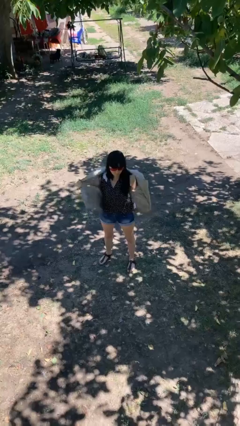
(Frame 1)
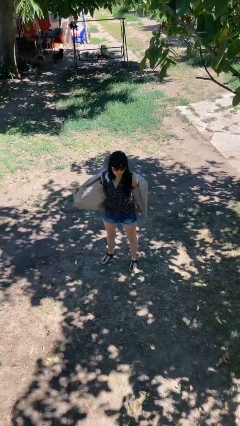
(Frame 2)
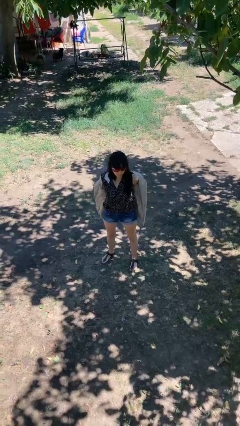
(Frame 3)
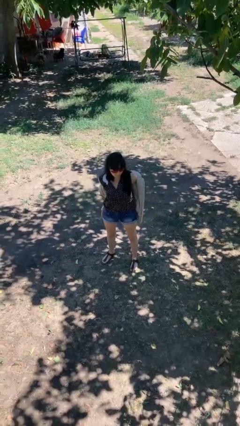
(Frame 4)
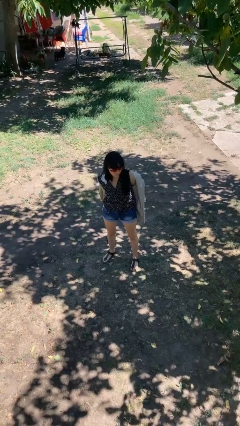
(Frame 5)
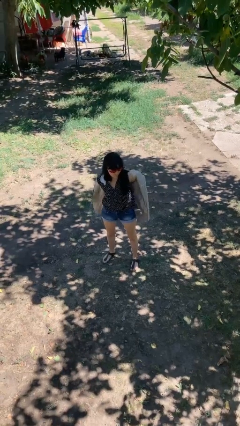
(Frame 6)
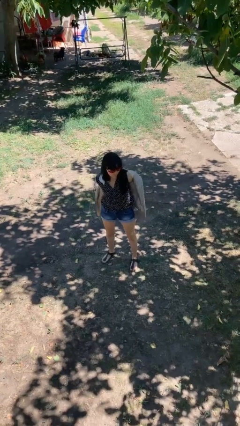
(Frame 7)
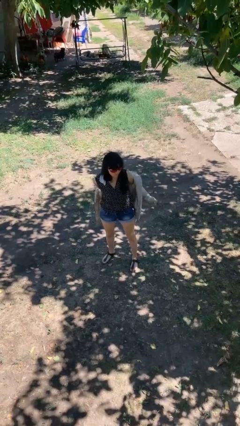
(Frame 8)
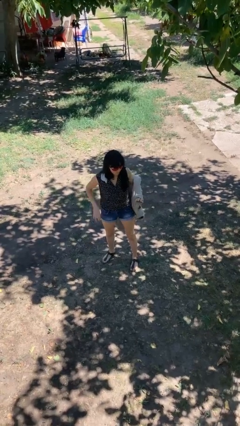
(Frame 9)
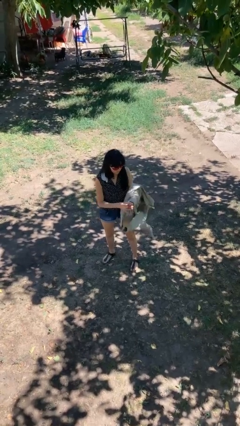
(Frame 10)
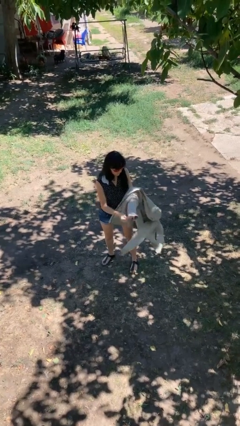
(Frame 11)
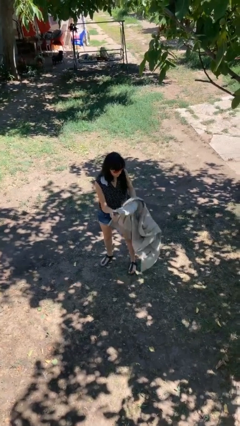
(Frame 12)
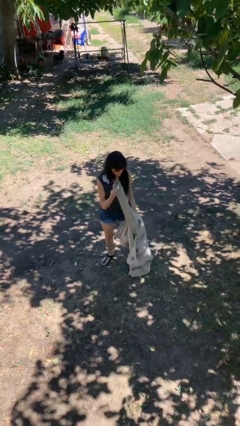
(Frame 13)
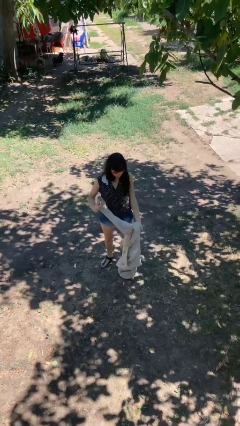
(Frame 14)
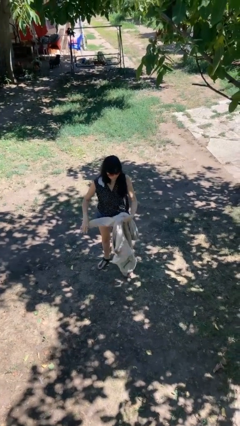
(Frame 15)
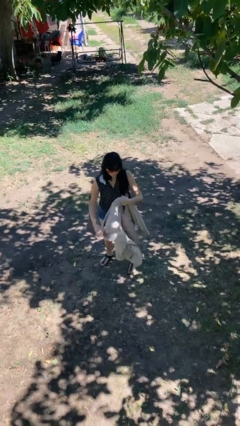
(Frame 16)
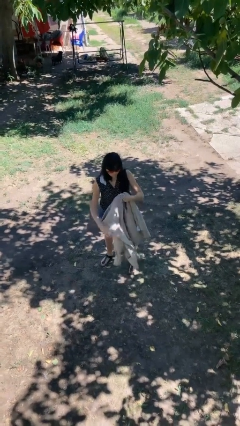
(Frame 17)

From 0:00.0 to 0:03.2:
person takes off jacket

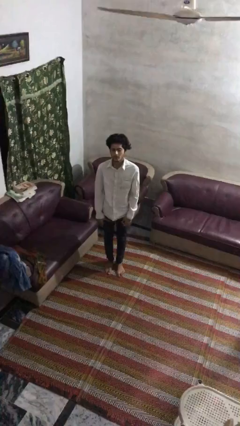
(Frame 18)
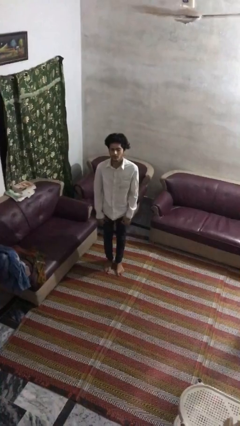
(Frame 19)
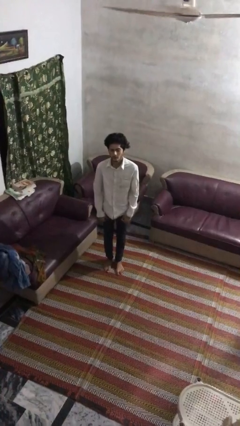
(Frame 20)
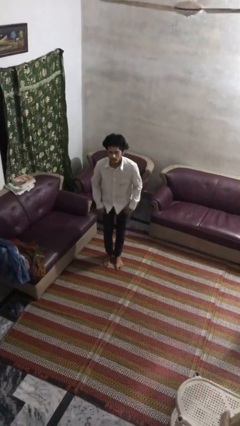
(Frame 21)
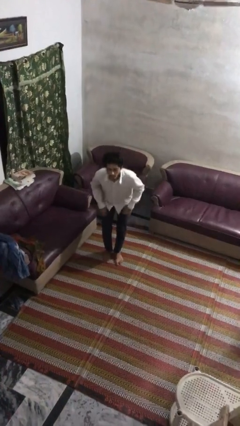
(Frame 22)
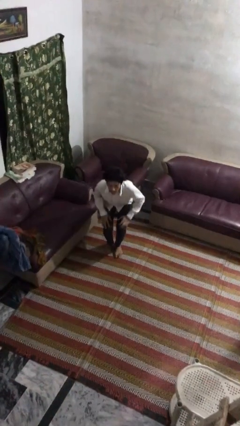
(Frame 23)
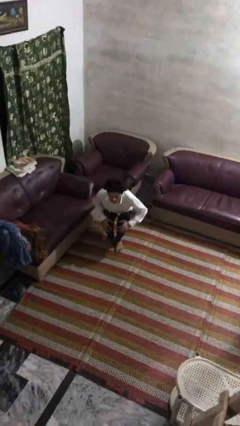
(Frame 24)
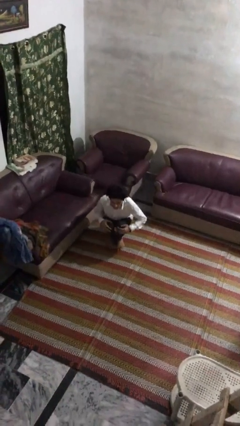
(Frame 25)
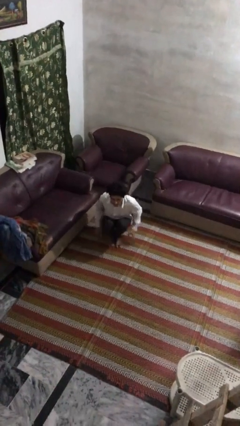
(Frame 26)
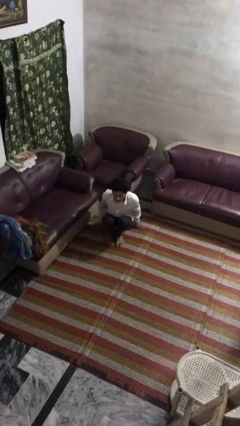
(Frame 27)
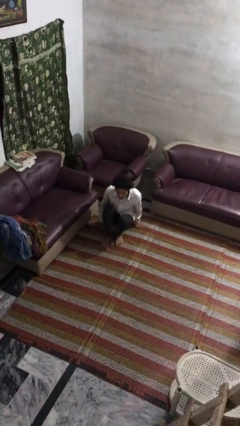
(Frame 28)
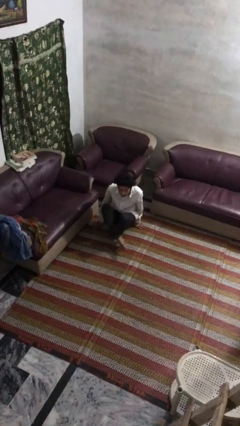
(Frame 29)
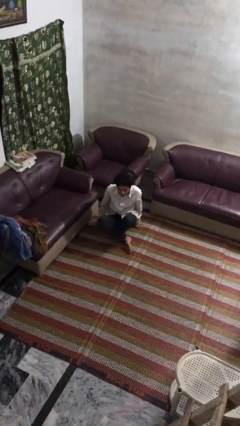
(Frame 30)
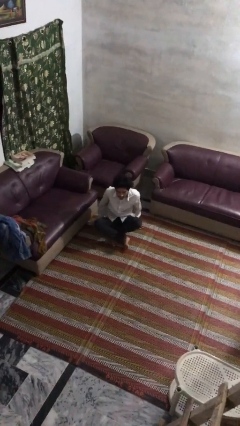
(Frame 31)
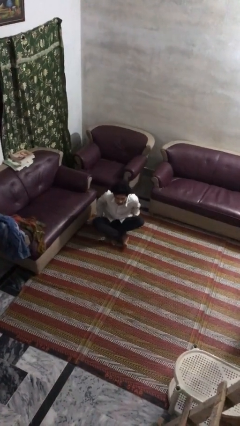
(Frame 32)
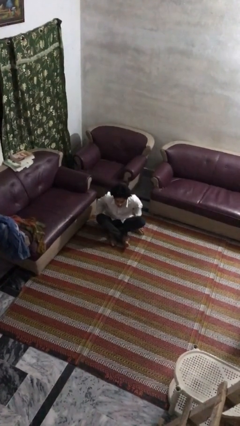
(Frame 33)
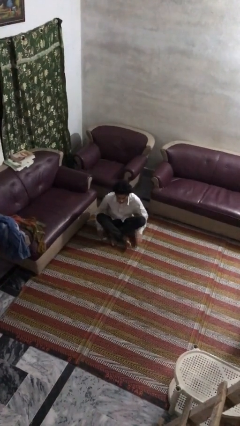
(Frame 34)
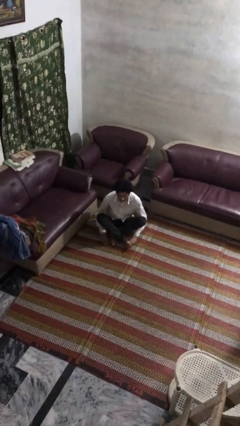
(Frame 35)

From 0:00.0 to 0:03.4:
person sits crisscross

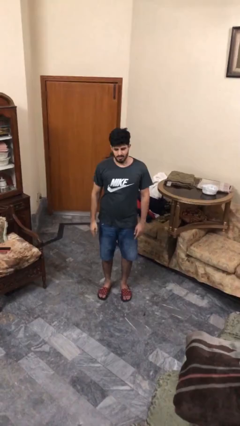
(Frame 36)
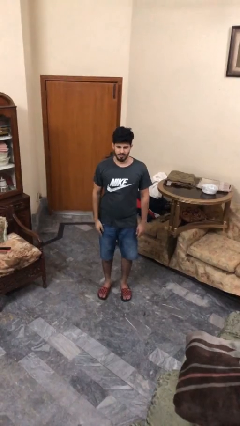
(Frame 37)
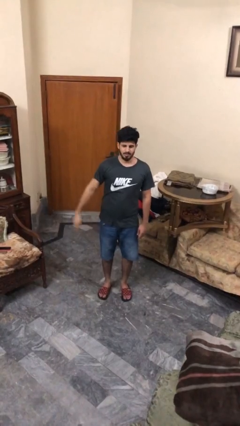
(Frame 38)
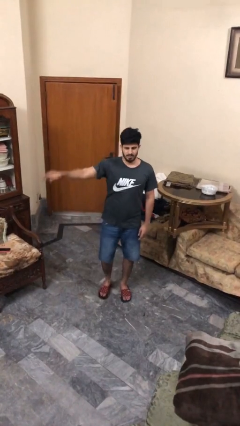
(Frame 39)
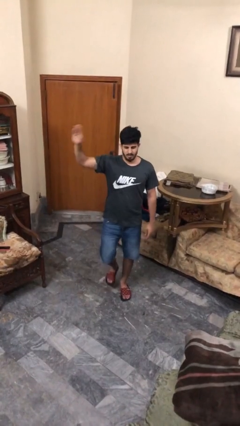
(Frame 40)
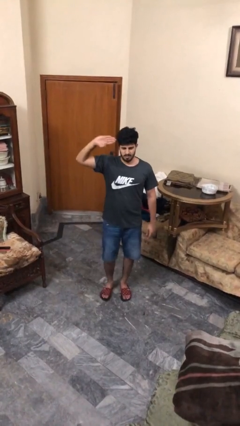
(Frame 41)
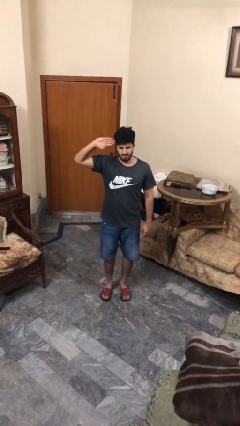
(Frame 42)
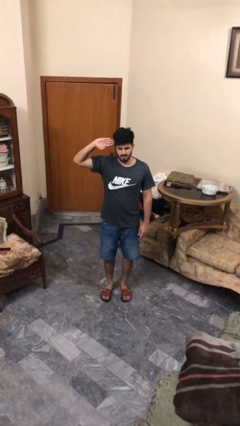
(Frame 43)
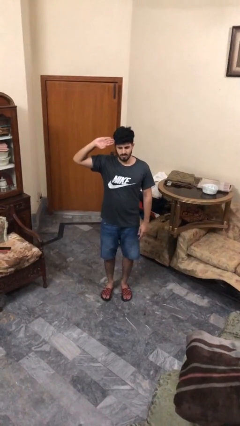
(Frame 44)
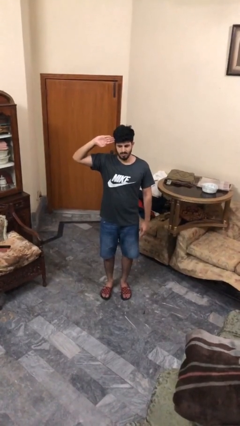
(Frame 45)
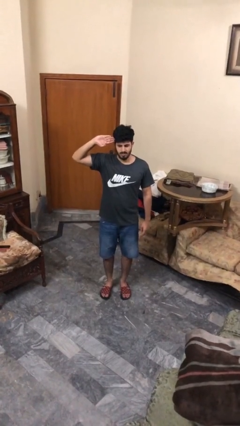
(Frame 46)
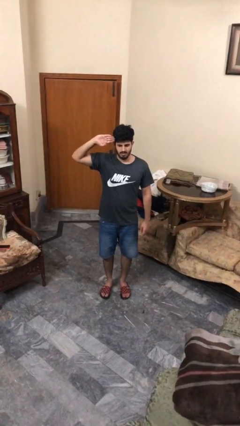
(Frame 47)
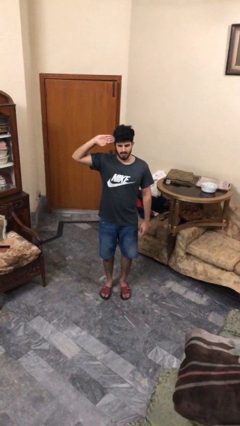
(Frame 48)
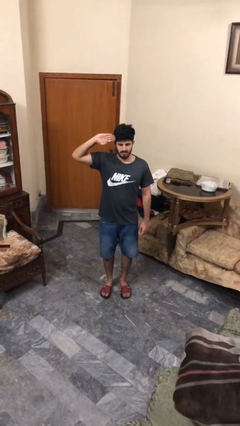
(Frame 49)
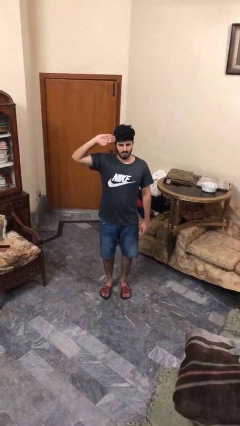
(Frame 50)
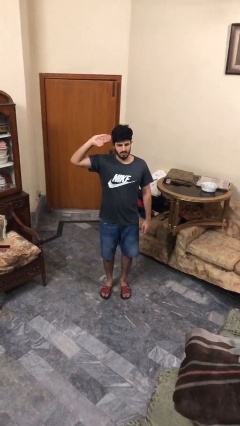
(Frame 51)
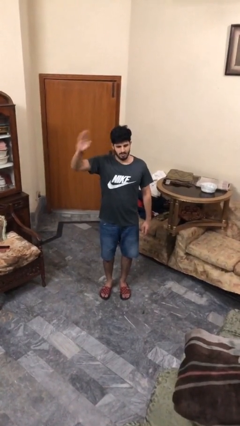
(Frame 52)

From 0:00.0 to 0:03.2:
person salutes

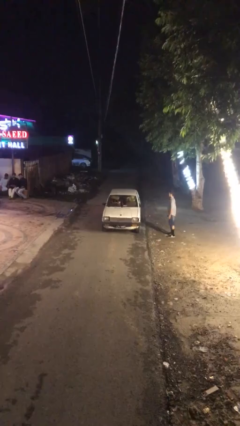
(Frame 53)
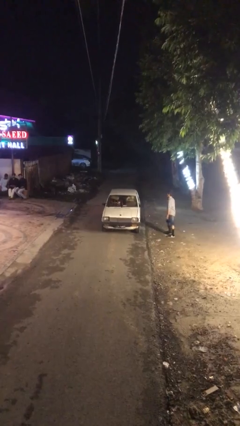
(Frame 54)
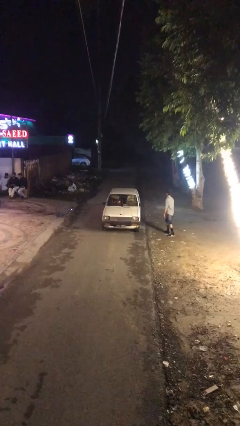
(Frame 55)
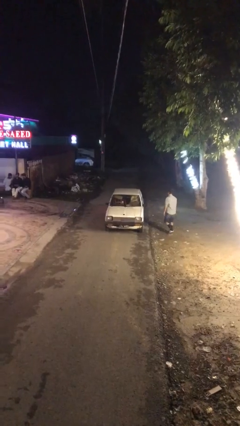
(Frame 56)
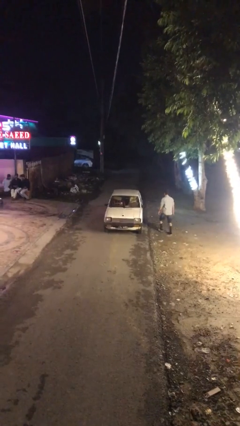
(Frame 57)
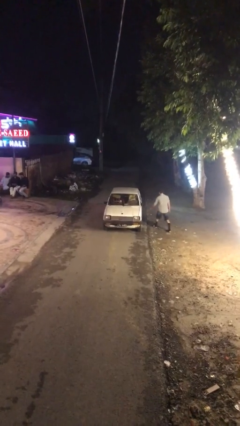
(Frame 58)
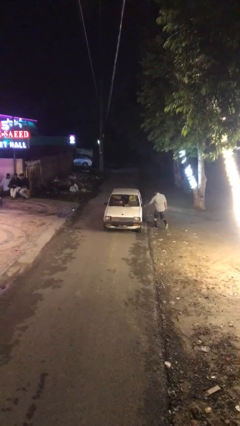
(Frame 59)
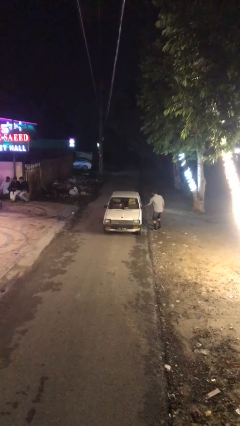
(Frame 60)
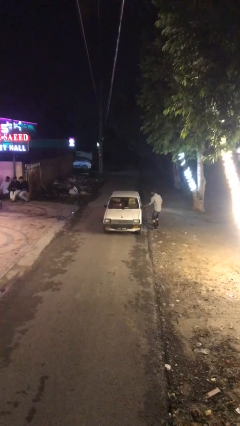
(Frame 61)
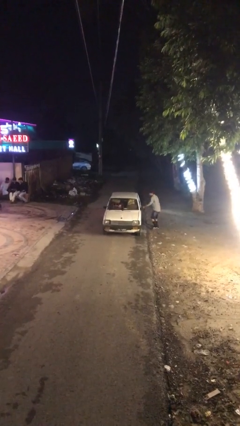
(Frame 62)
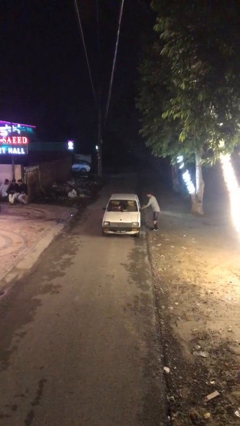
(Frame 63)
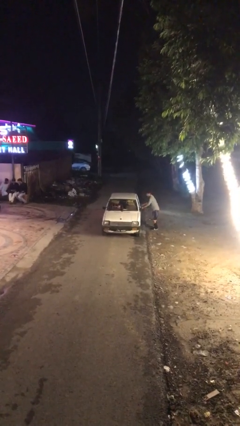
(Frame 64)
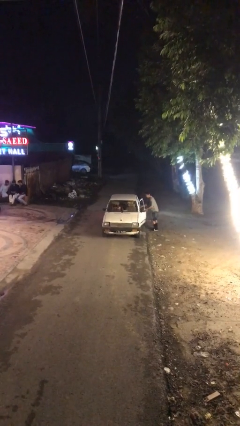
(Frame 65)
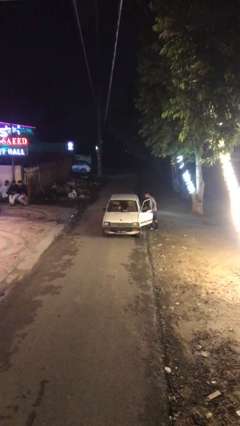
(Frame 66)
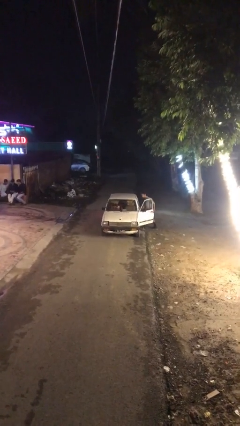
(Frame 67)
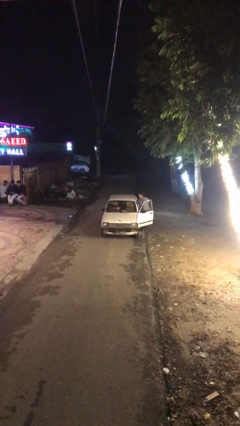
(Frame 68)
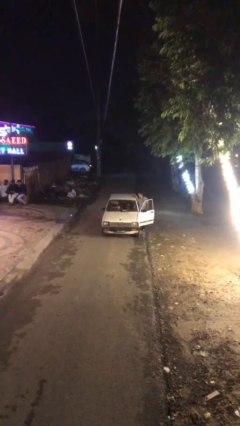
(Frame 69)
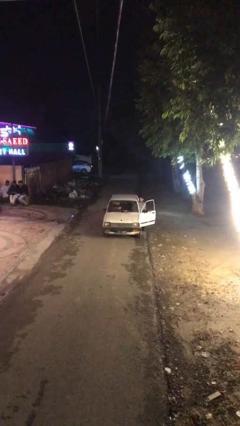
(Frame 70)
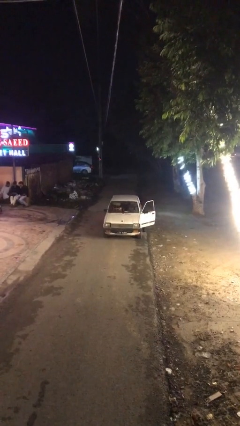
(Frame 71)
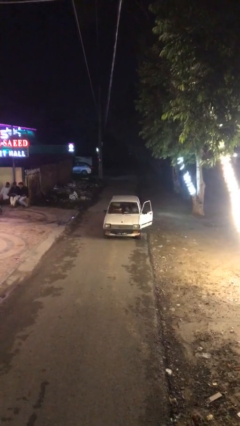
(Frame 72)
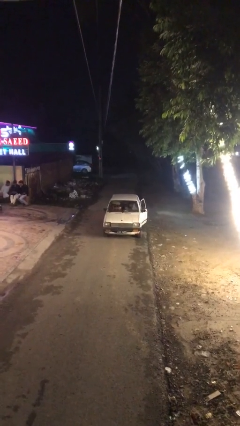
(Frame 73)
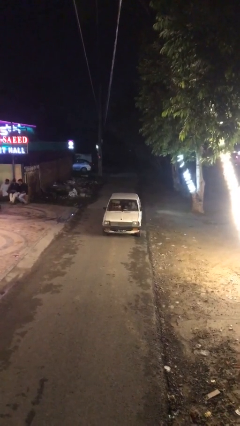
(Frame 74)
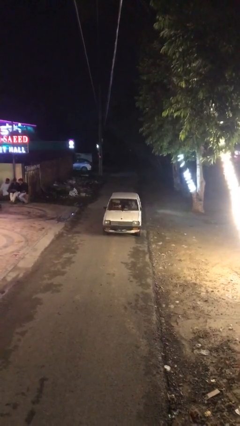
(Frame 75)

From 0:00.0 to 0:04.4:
car picks up person

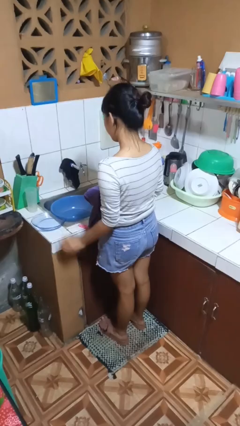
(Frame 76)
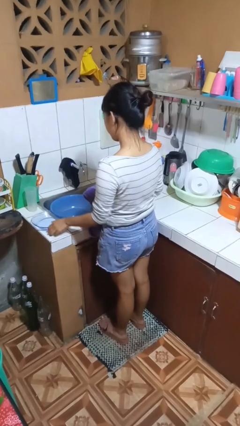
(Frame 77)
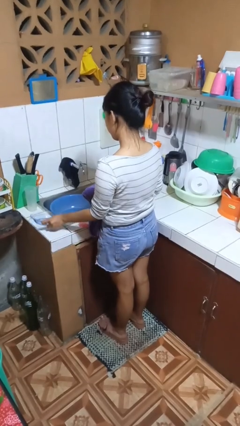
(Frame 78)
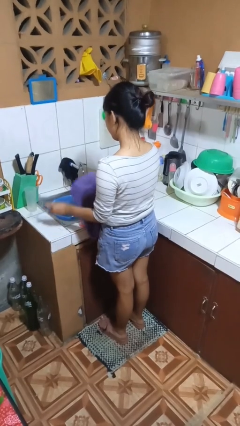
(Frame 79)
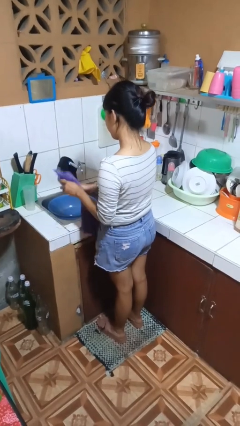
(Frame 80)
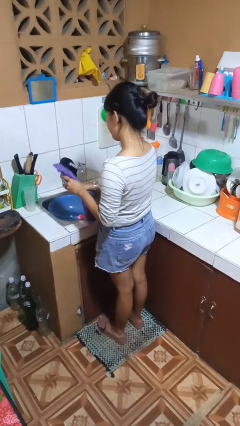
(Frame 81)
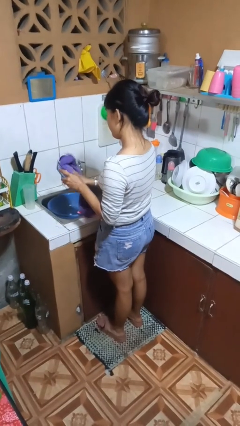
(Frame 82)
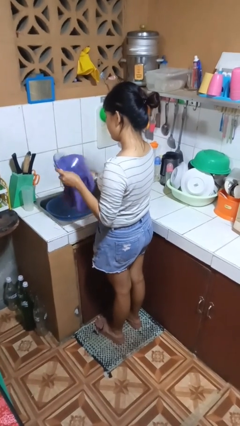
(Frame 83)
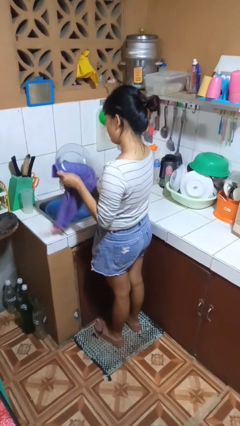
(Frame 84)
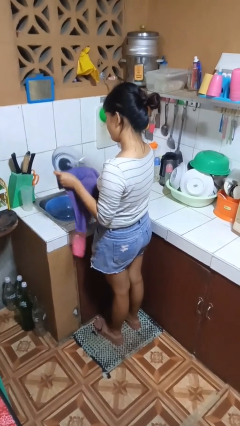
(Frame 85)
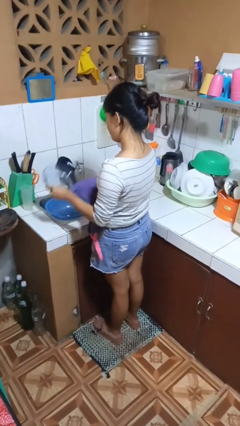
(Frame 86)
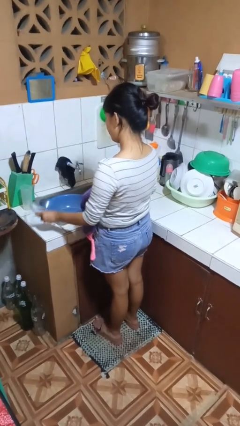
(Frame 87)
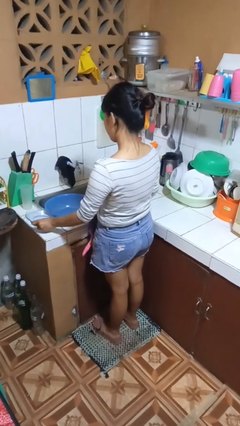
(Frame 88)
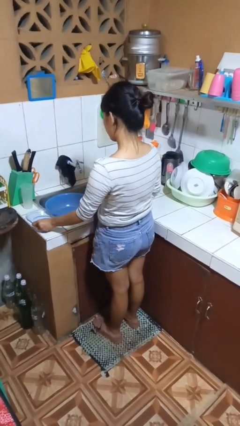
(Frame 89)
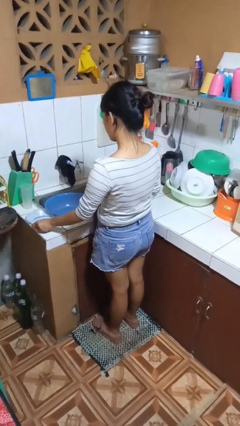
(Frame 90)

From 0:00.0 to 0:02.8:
person dries dish

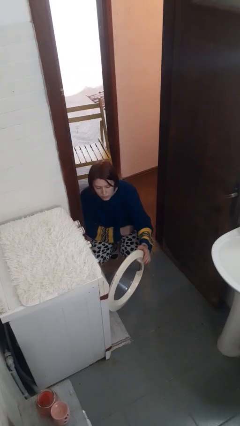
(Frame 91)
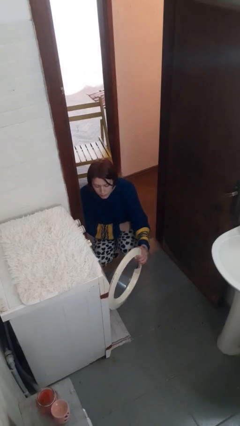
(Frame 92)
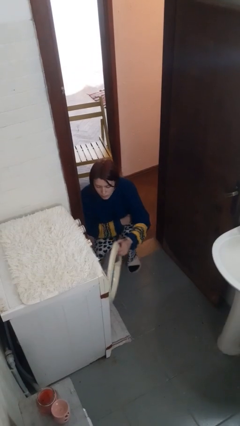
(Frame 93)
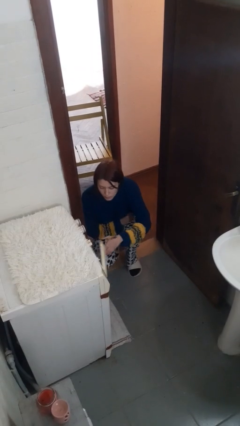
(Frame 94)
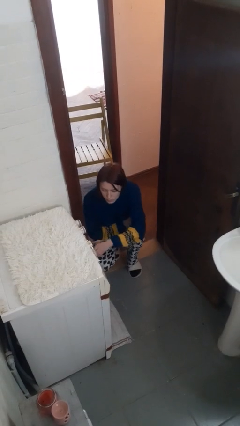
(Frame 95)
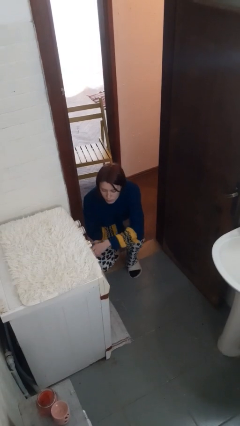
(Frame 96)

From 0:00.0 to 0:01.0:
person closes clothes washer
